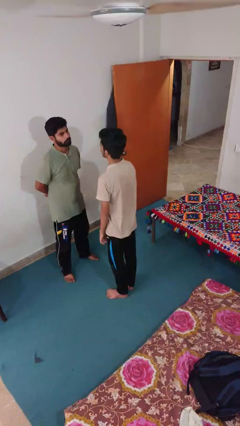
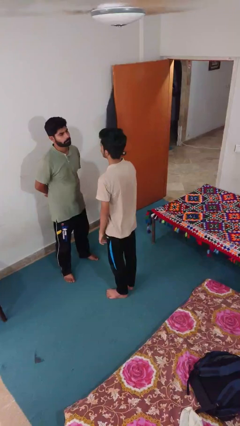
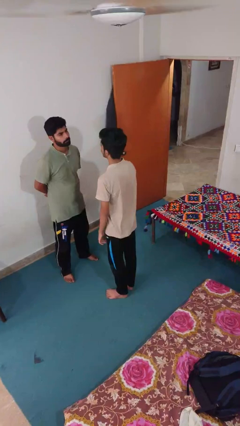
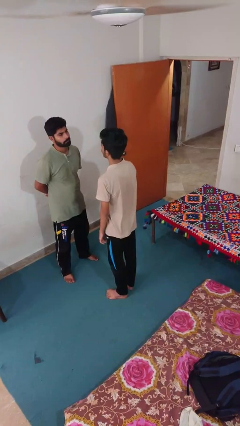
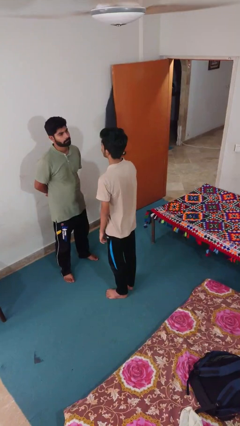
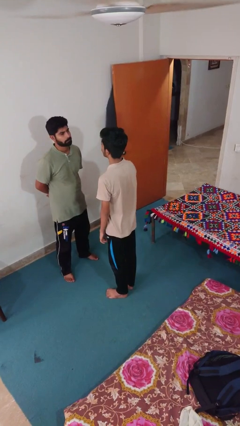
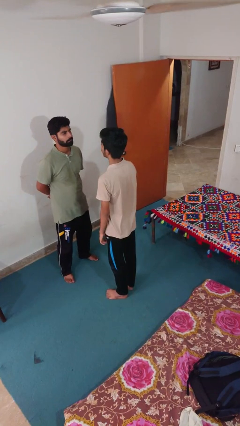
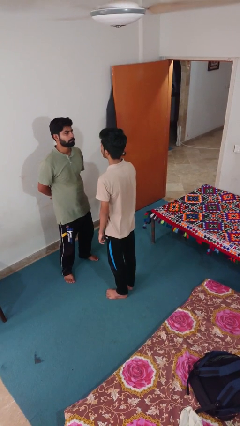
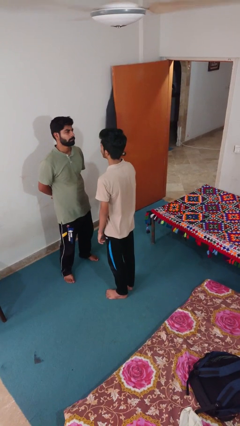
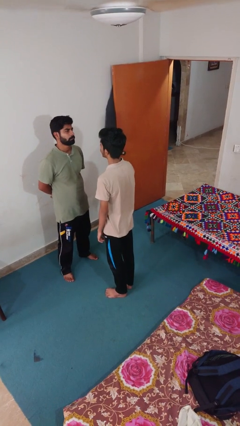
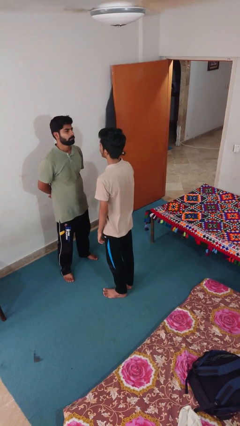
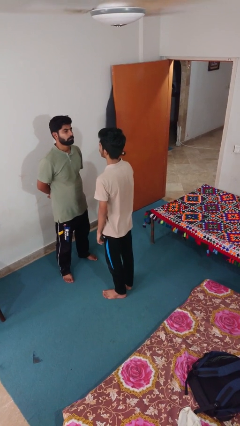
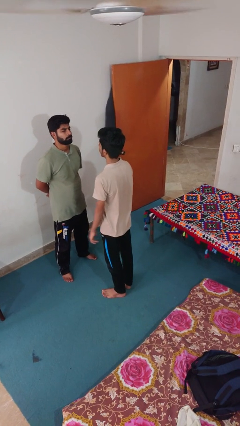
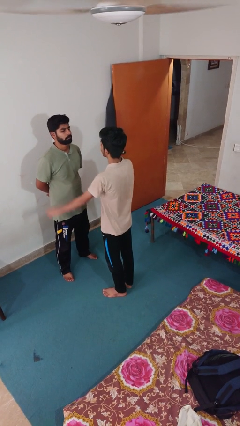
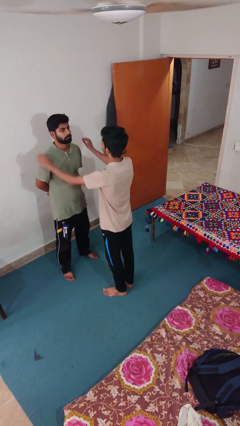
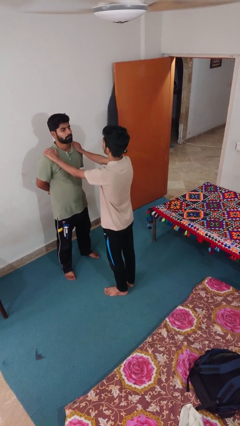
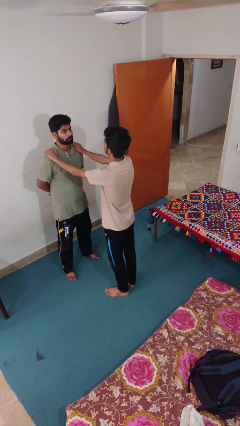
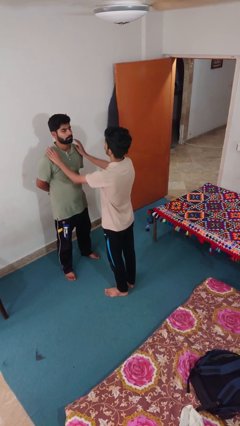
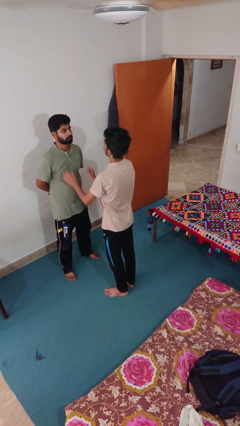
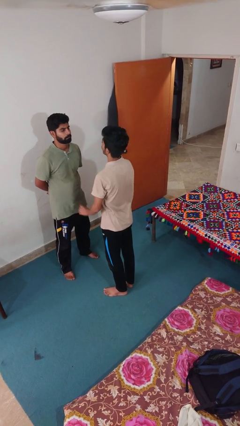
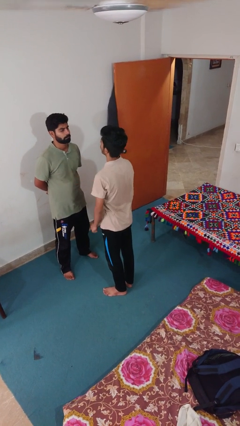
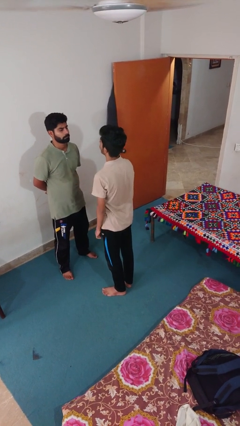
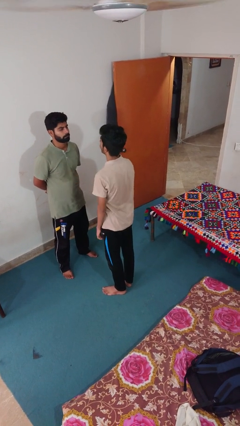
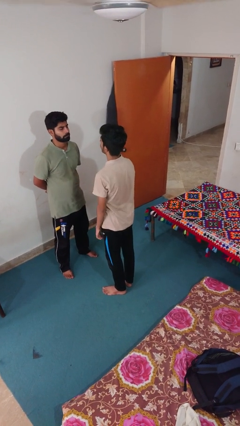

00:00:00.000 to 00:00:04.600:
person pounds shoulders of person

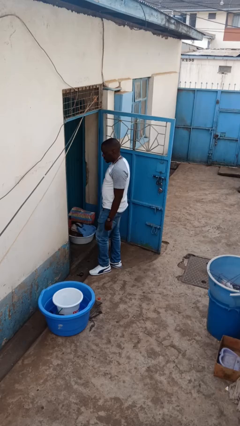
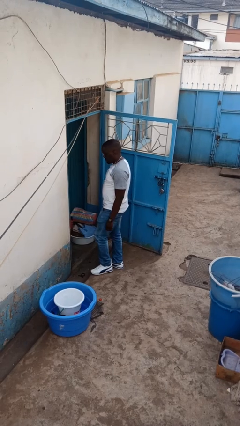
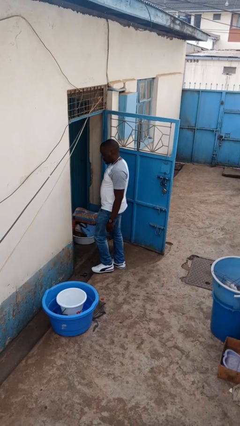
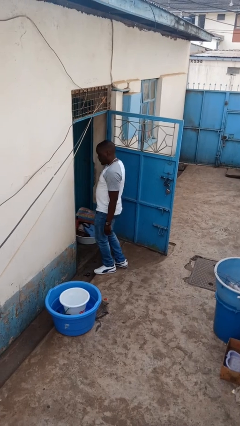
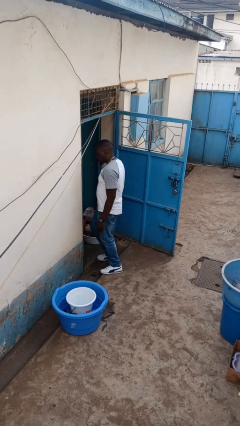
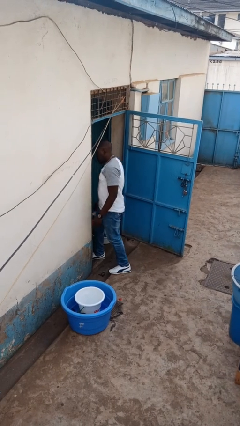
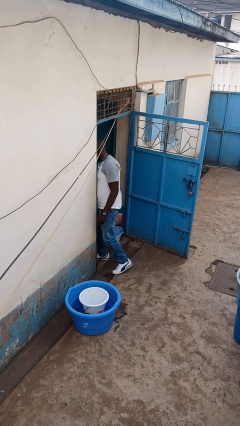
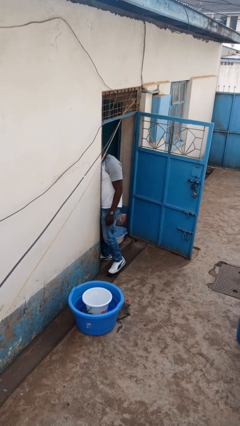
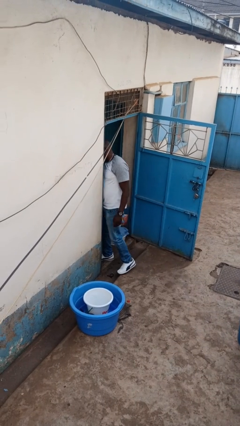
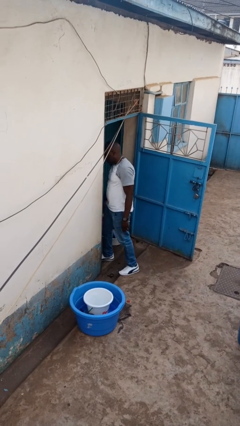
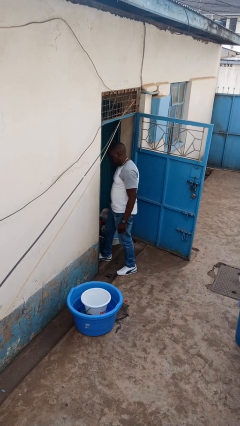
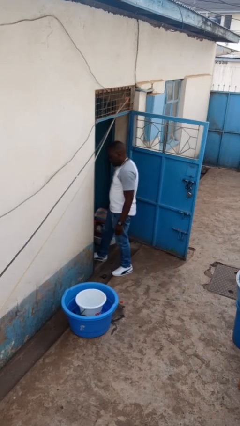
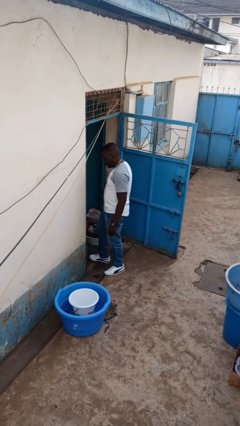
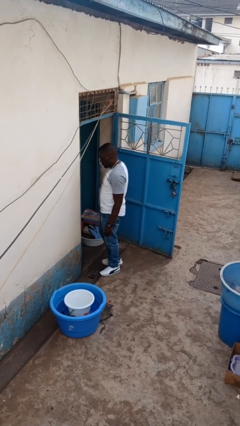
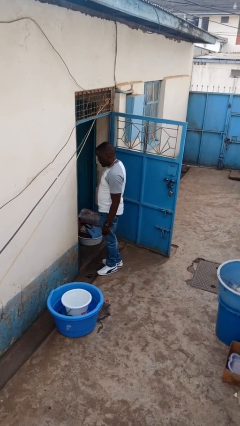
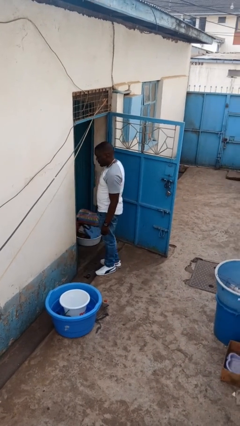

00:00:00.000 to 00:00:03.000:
person bumps into wall

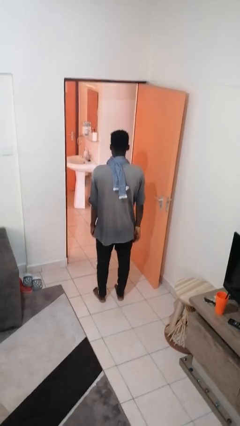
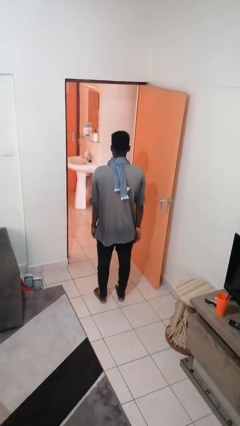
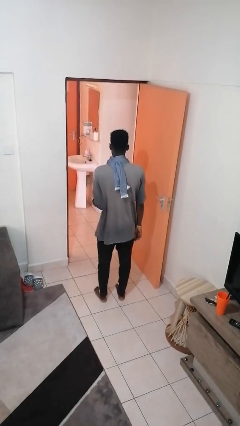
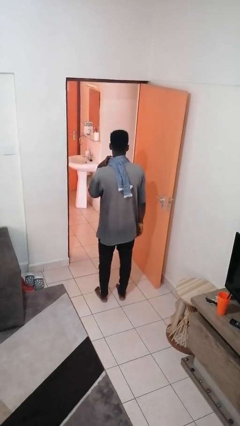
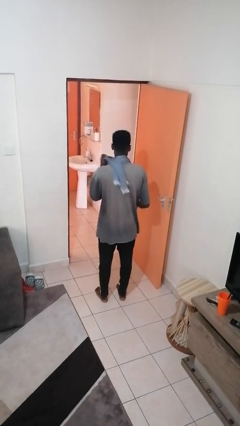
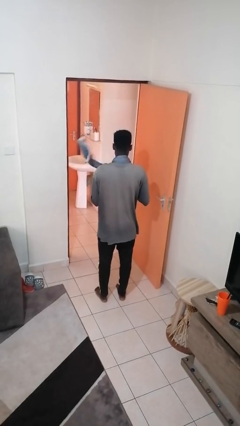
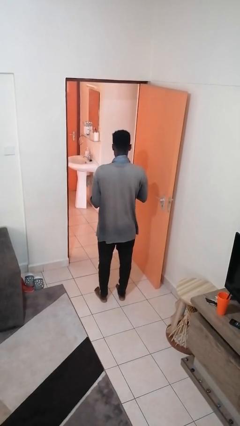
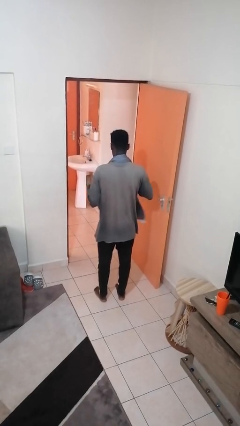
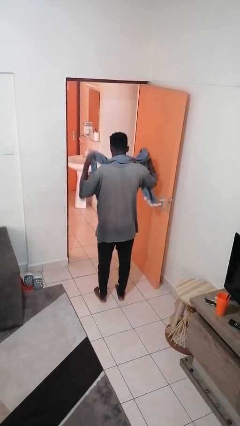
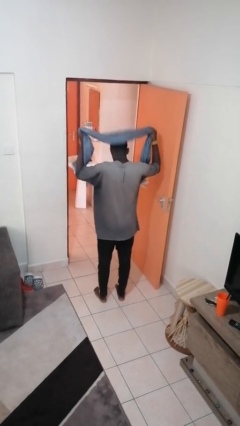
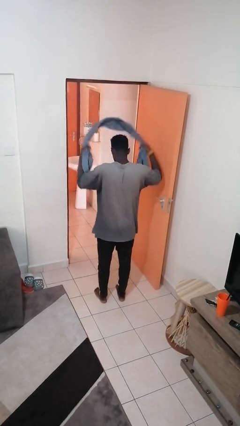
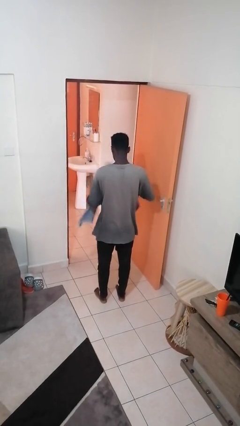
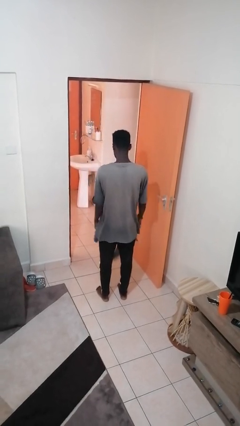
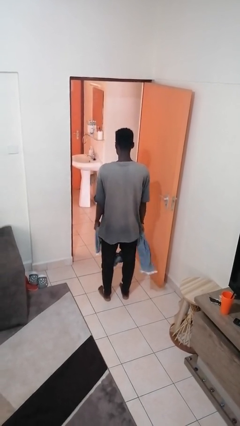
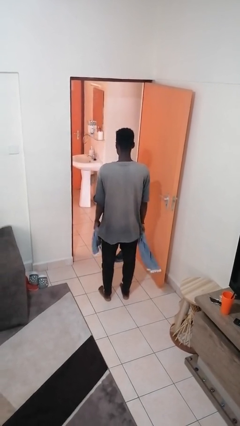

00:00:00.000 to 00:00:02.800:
person takes off scarf

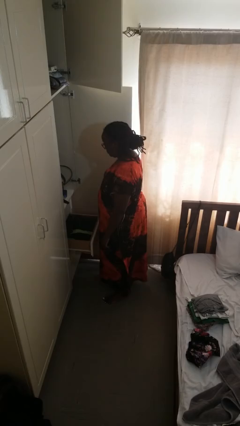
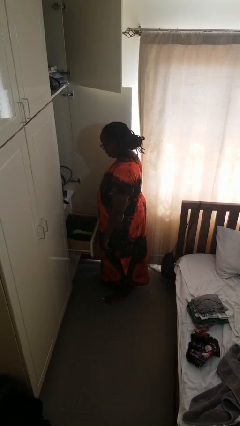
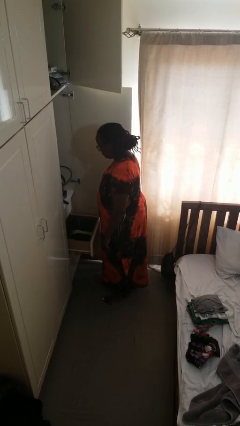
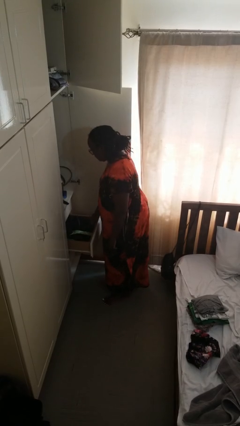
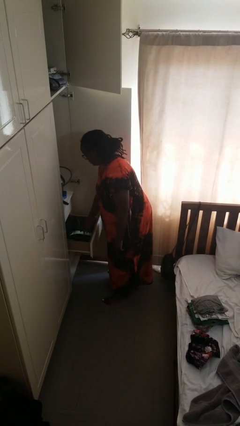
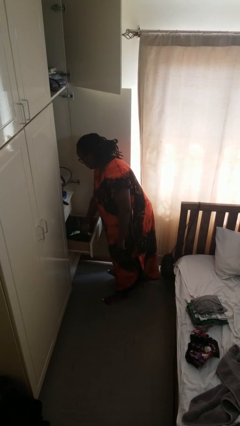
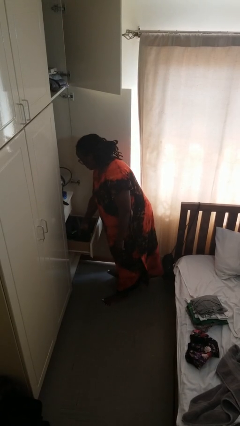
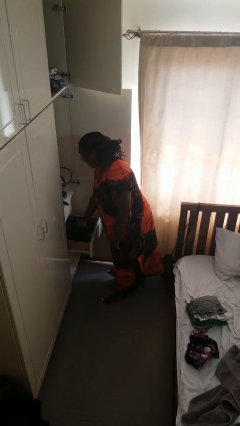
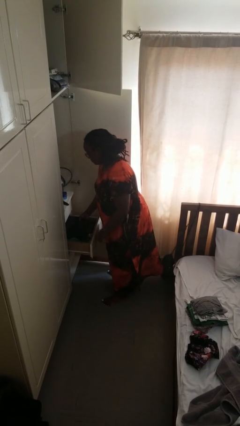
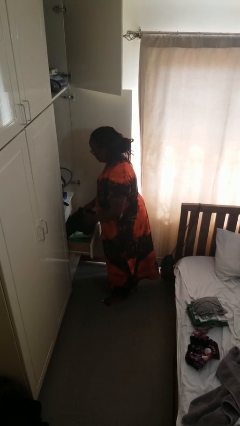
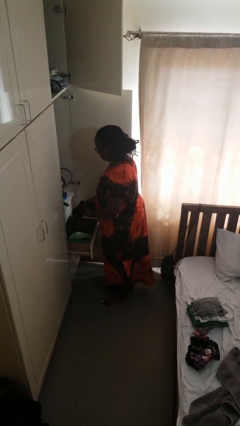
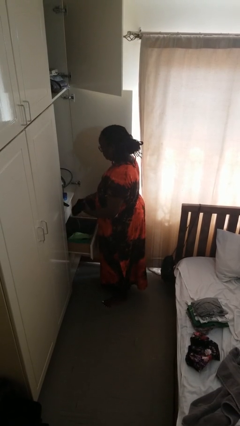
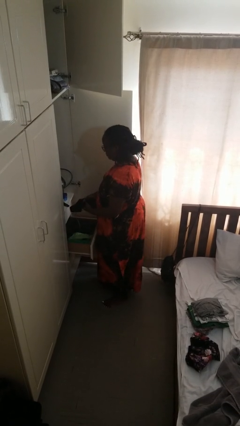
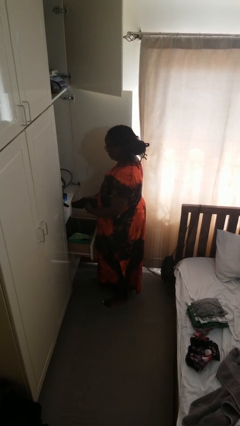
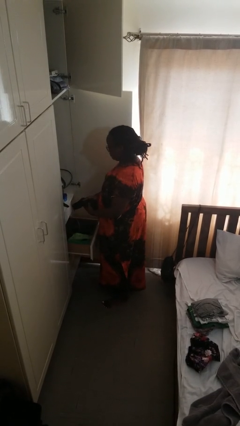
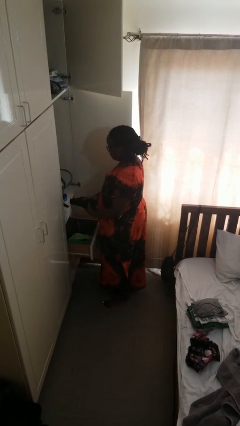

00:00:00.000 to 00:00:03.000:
person takes clothes from dresser

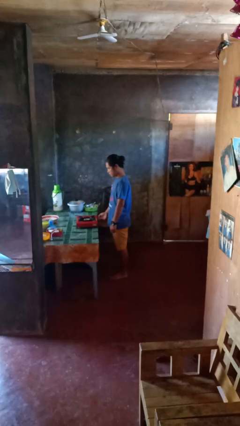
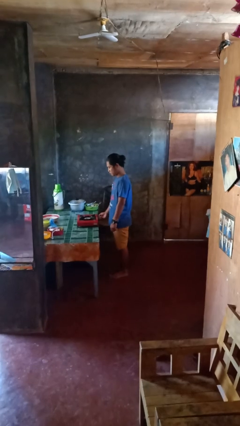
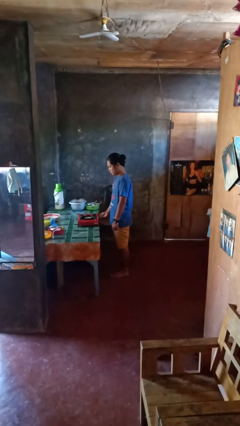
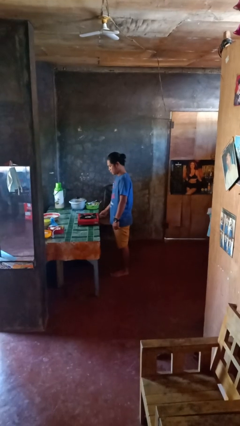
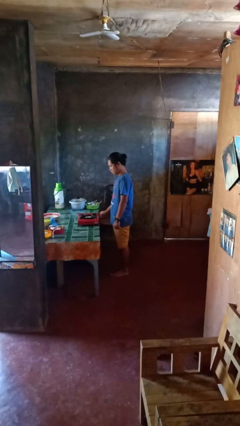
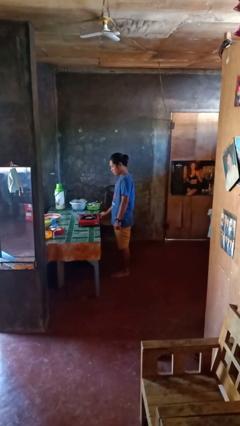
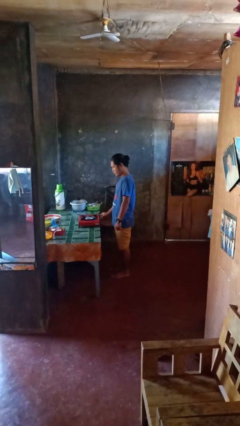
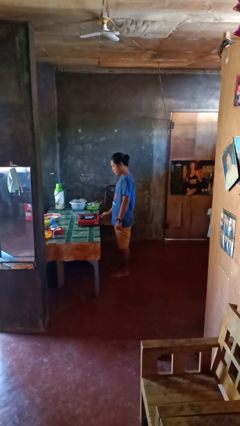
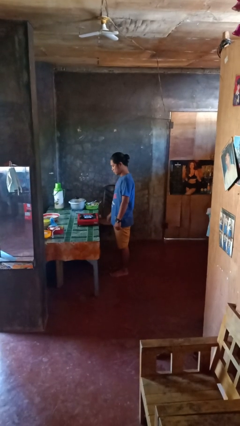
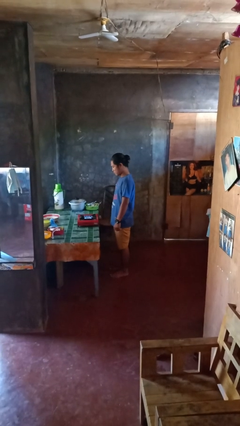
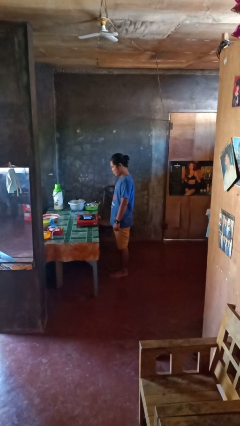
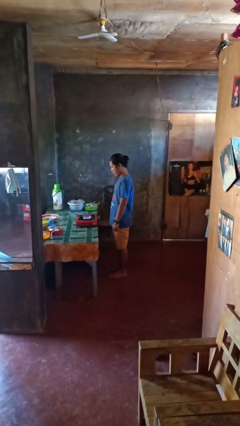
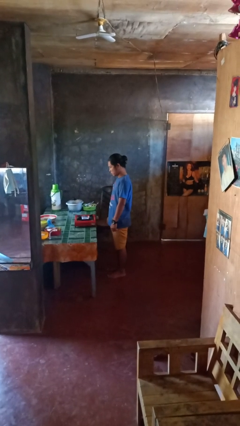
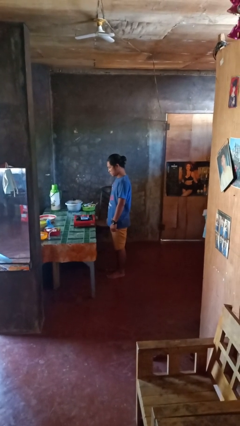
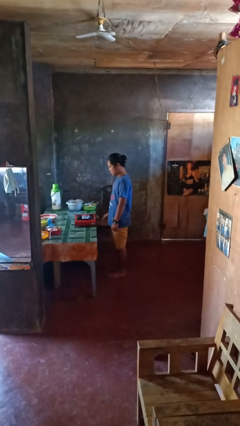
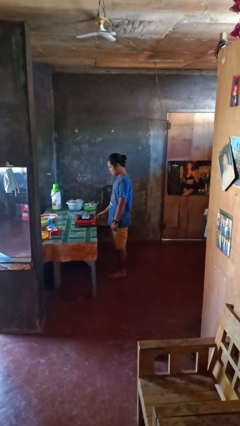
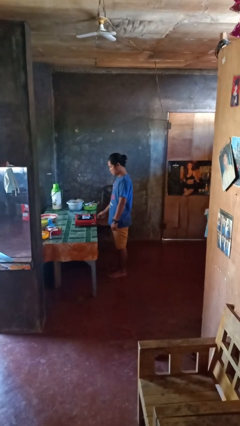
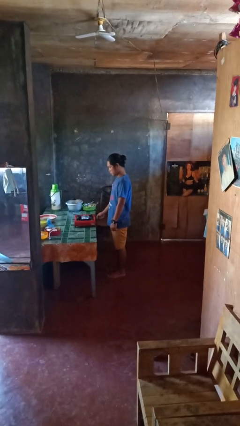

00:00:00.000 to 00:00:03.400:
person turns on stovetop

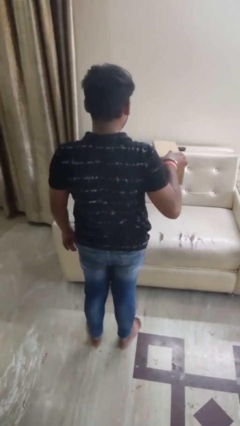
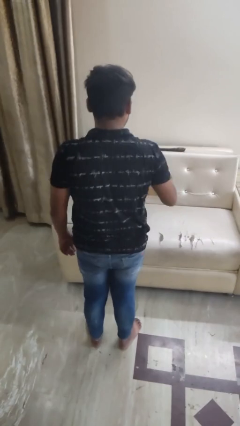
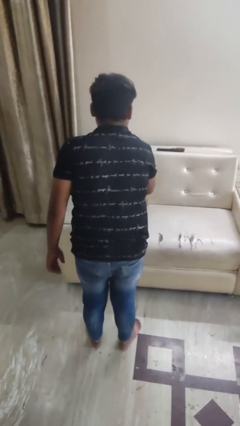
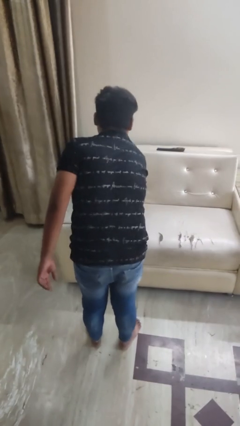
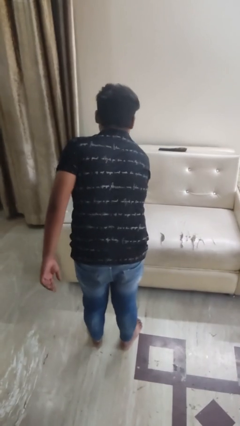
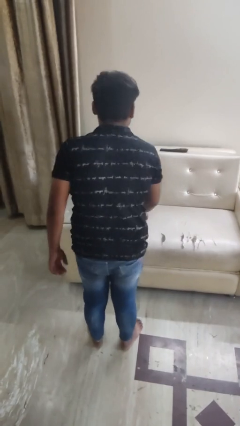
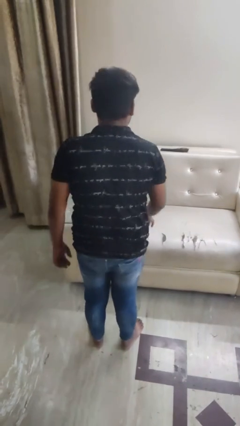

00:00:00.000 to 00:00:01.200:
person puts down object on bed
